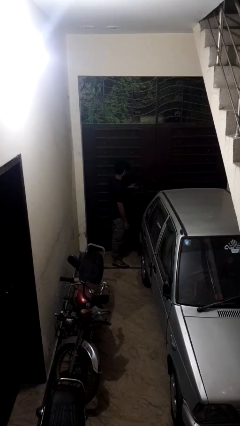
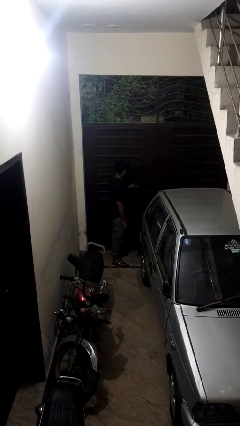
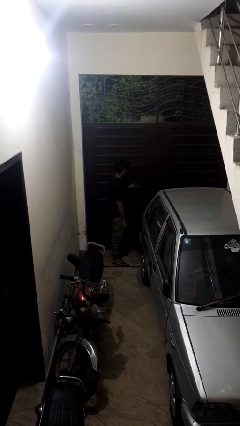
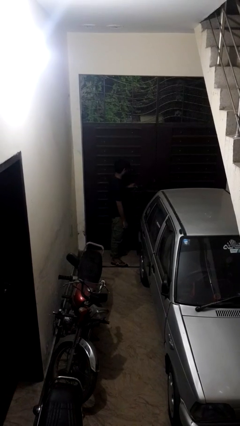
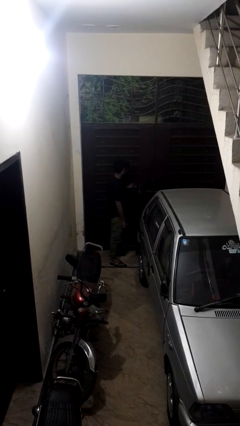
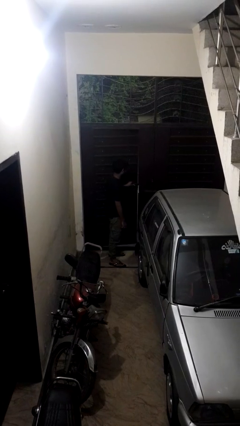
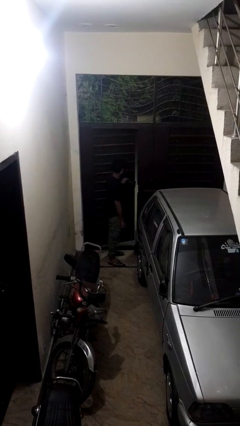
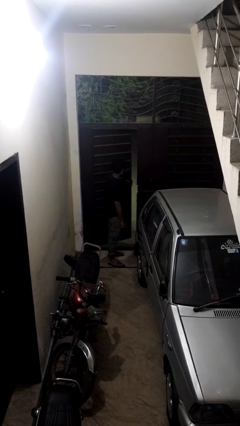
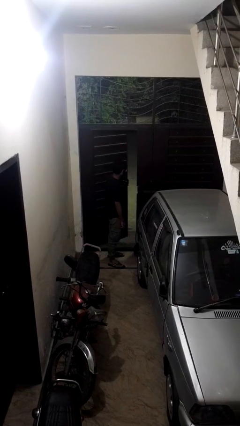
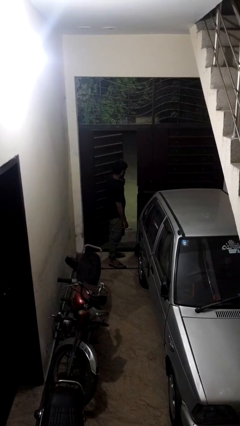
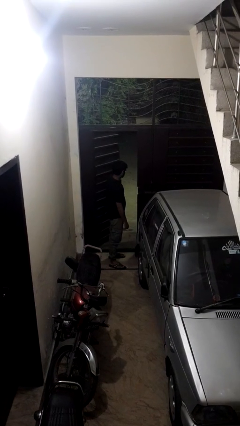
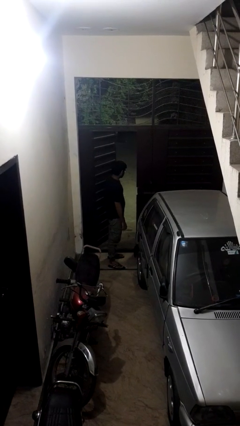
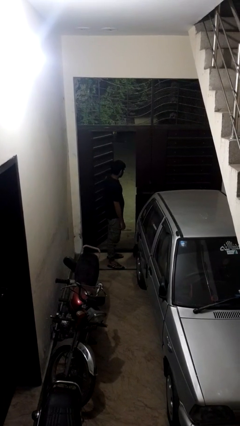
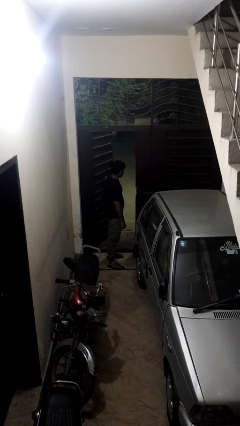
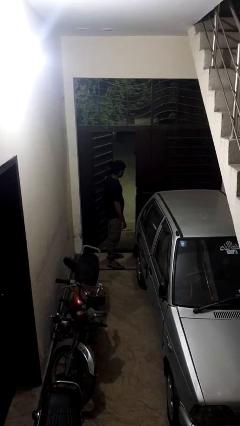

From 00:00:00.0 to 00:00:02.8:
person opens gate

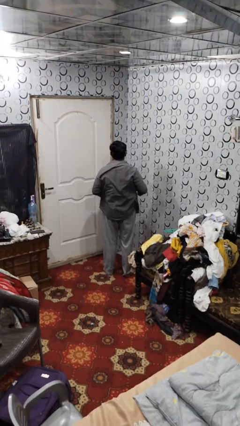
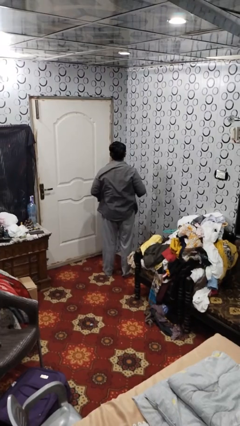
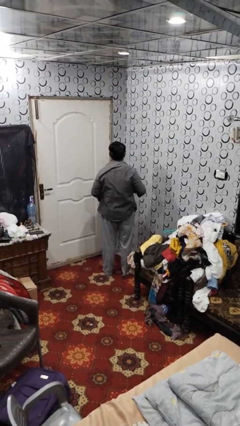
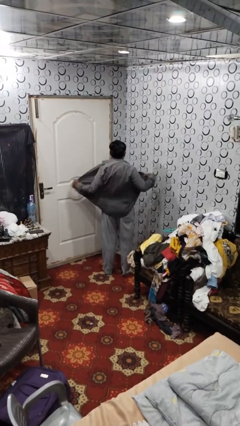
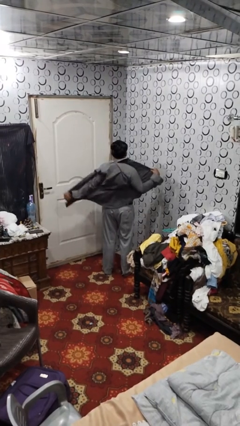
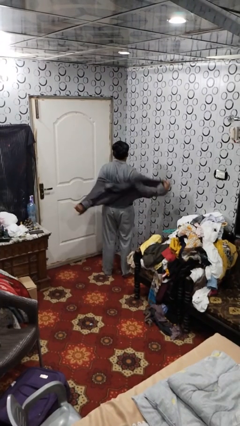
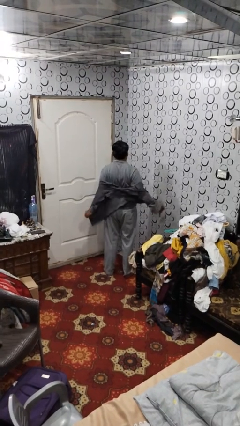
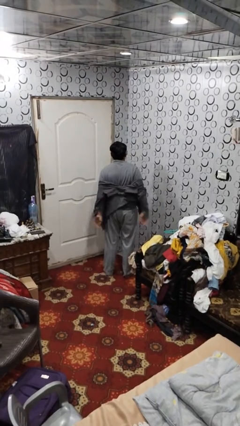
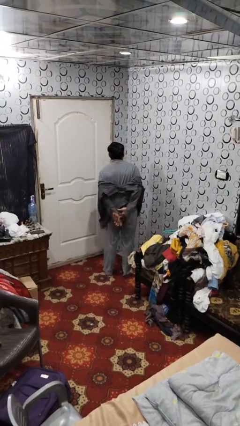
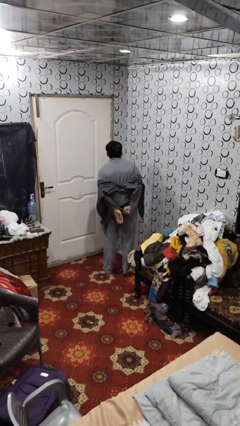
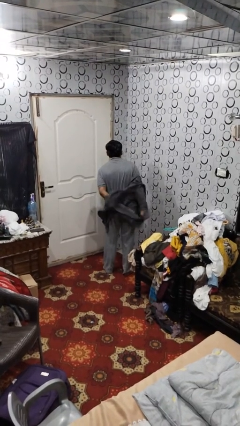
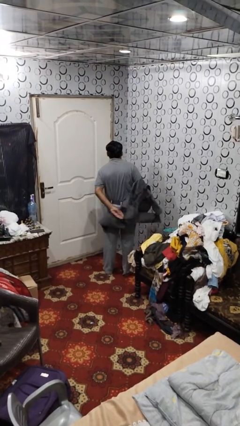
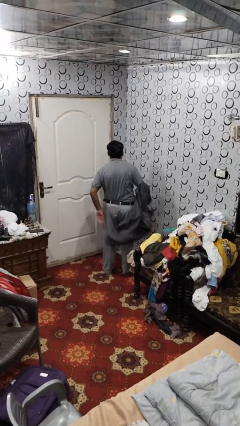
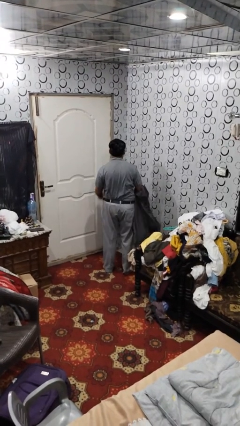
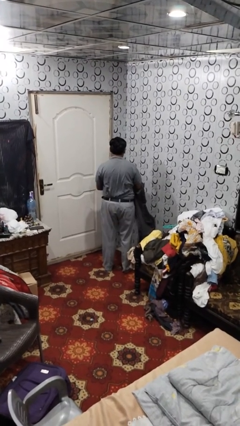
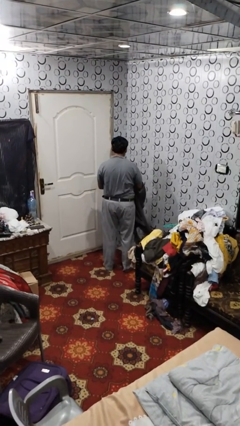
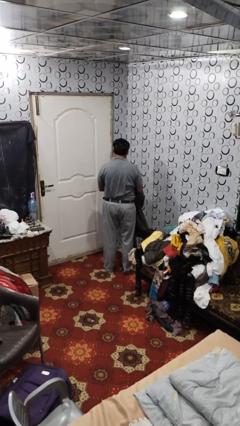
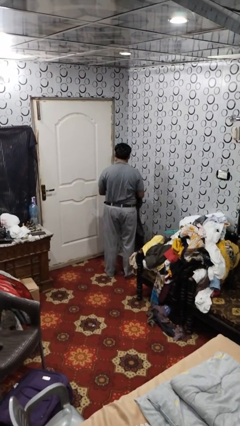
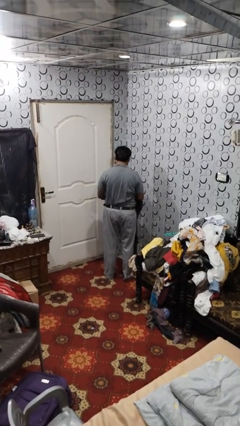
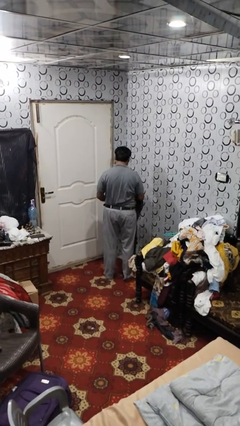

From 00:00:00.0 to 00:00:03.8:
person takes off shirt

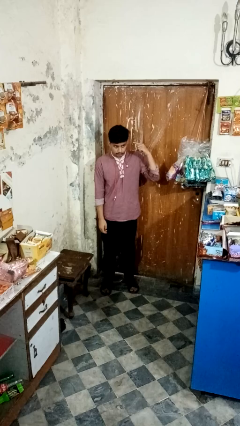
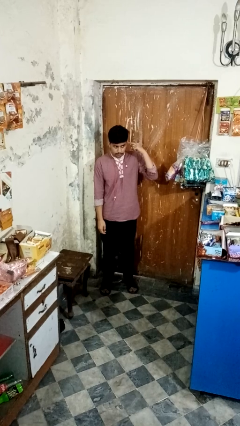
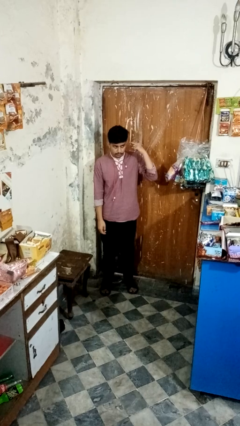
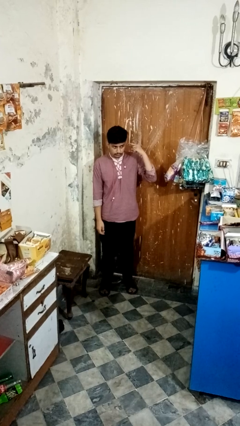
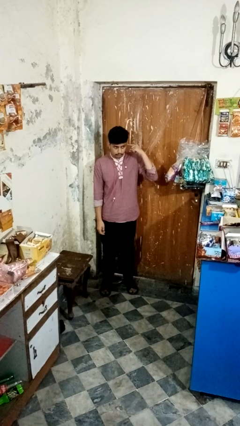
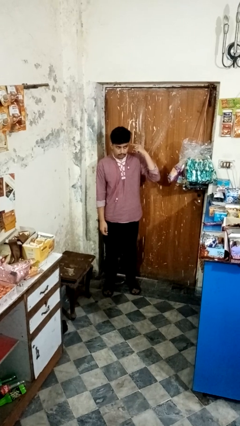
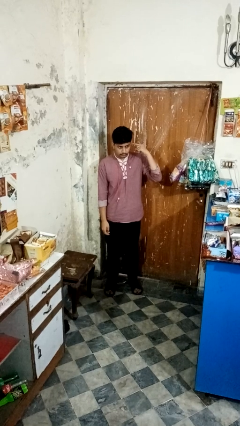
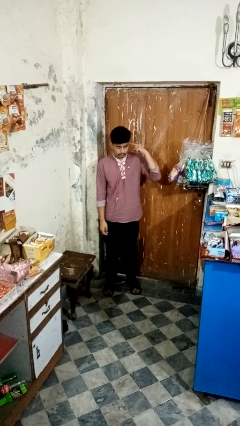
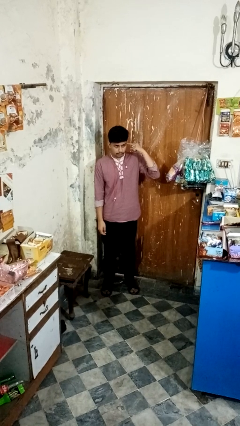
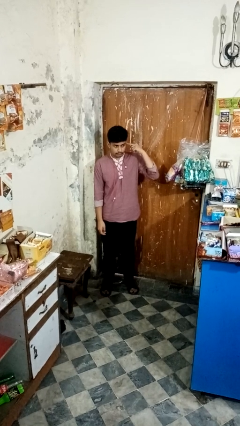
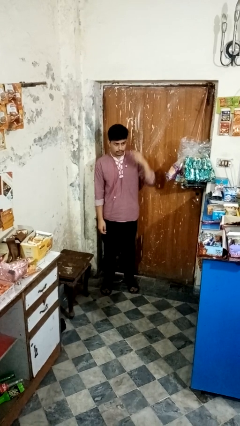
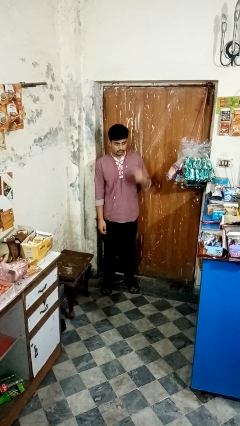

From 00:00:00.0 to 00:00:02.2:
person gestures listen closely

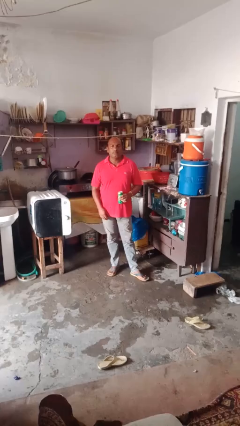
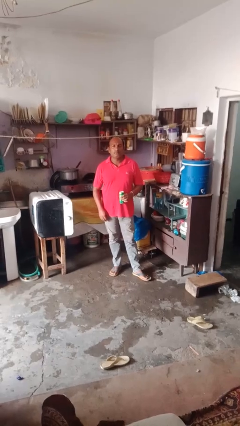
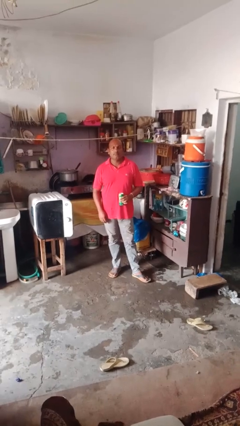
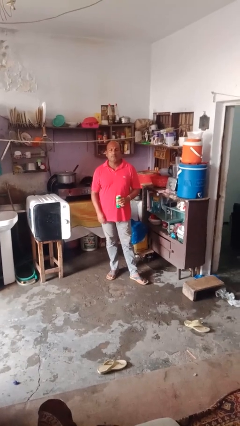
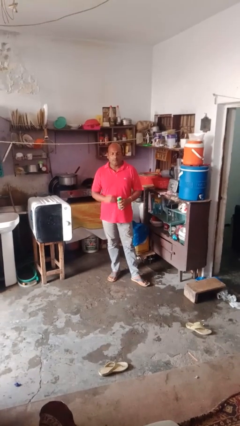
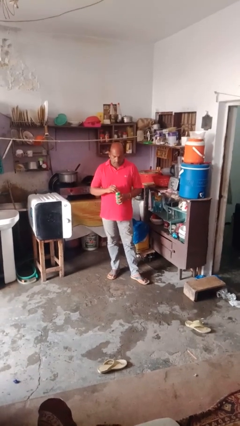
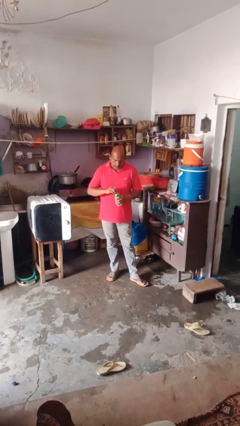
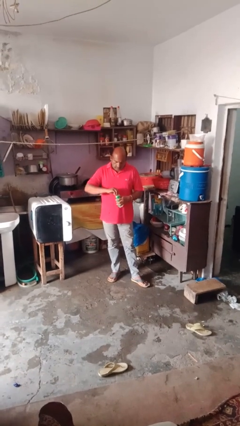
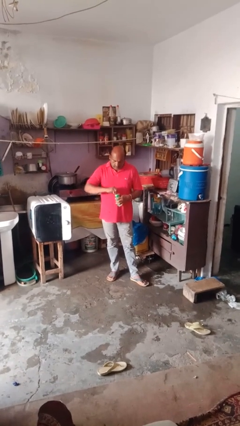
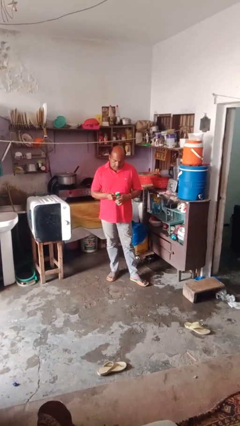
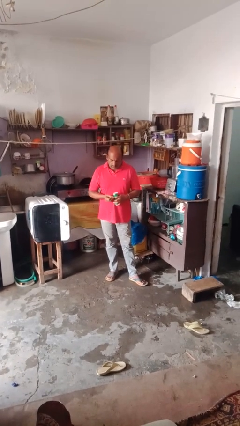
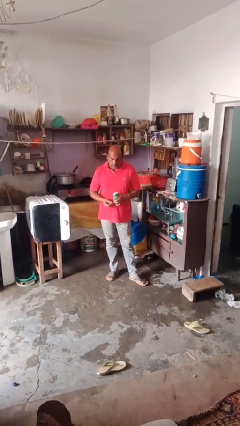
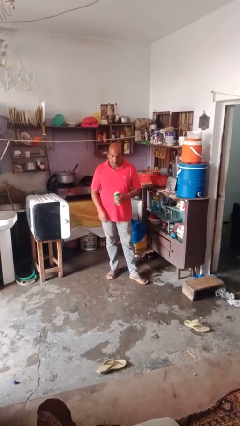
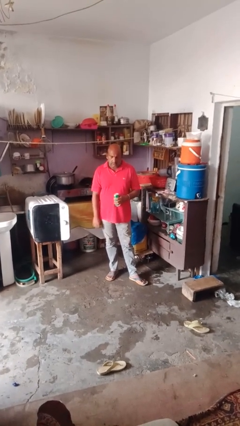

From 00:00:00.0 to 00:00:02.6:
person opens beverage can

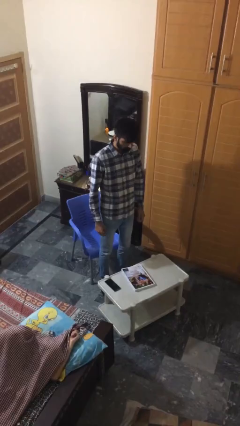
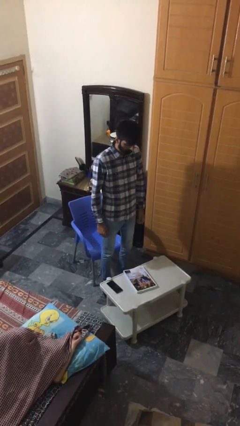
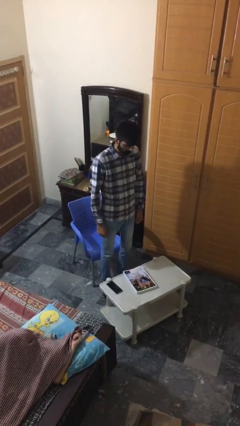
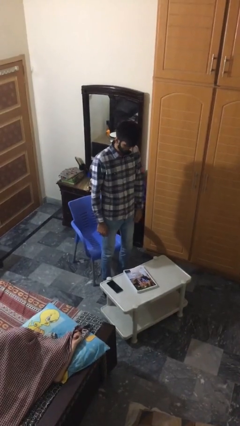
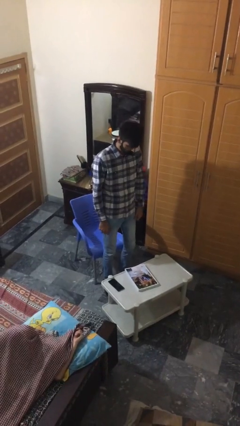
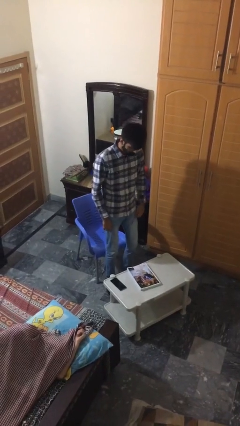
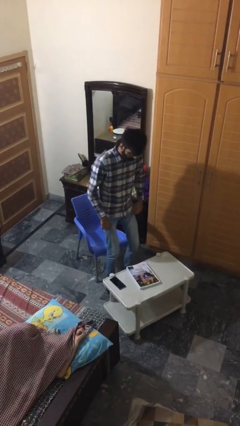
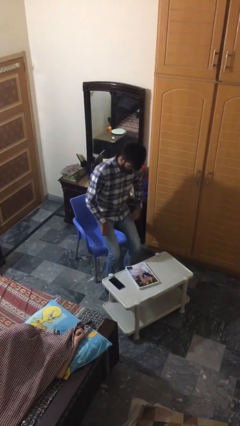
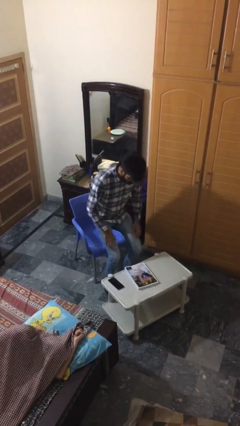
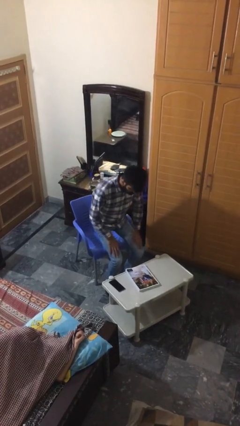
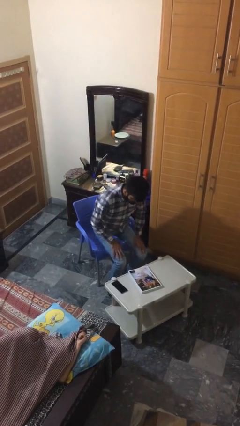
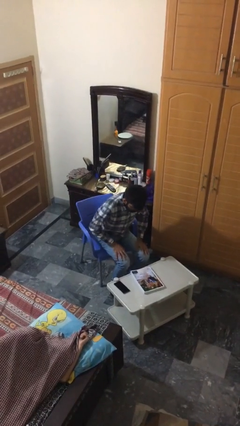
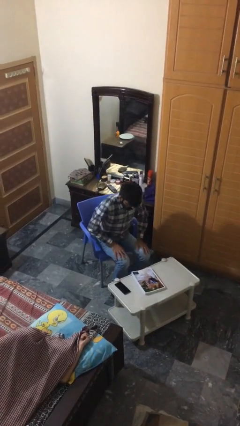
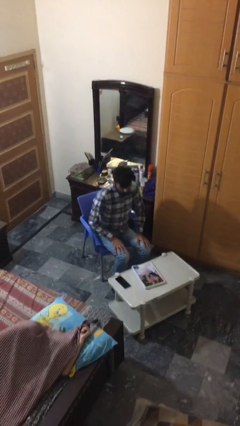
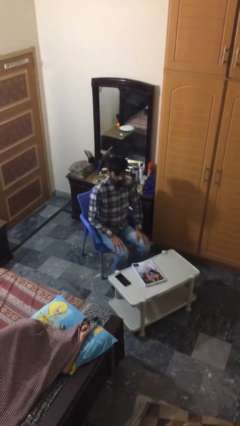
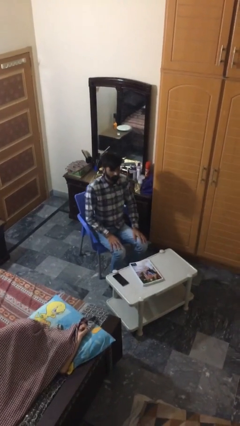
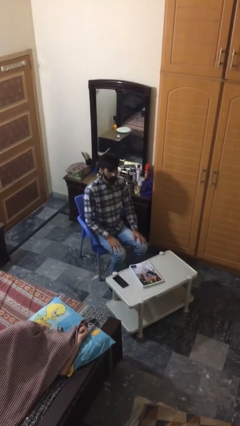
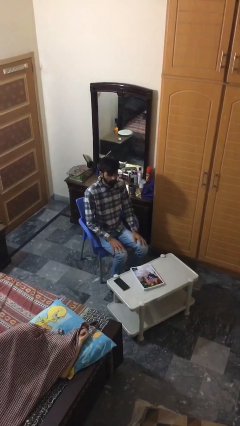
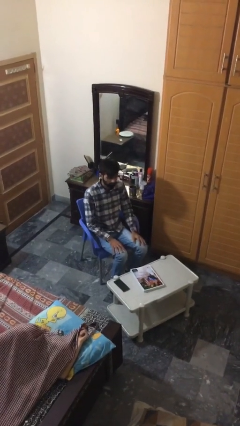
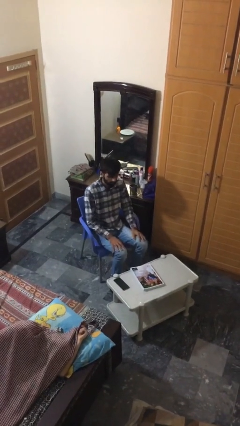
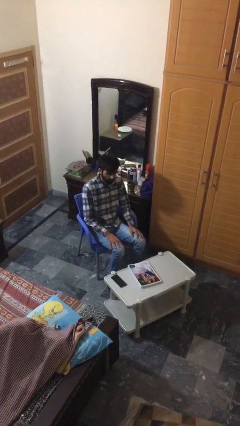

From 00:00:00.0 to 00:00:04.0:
person sits down

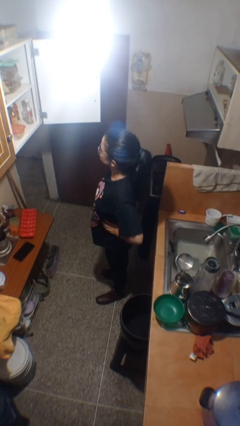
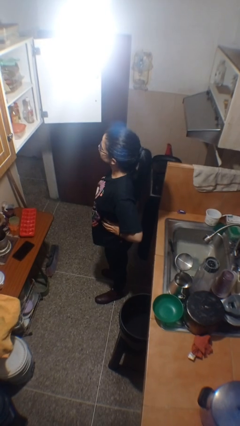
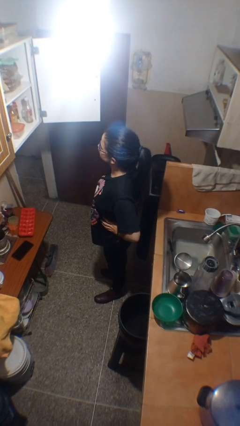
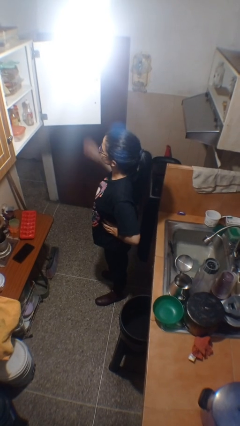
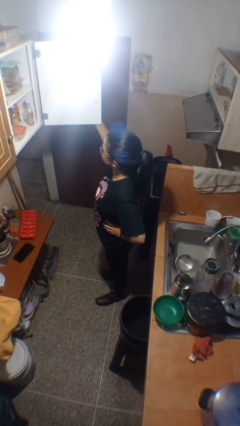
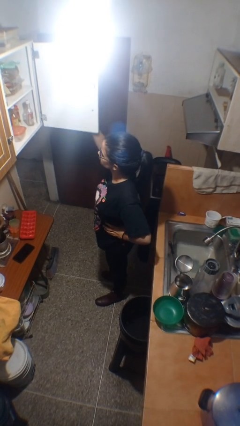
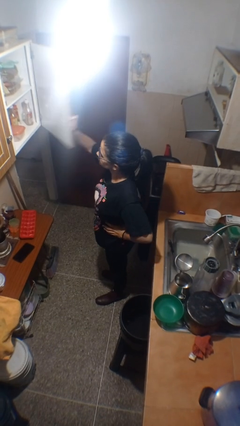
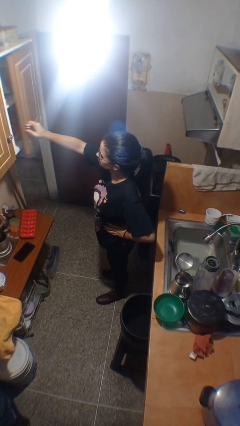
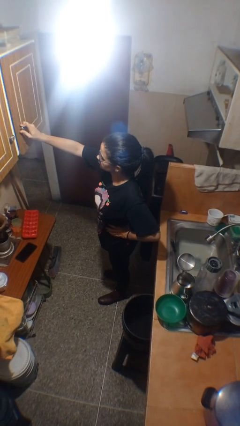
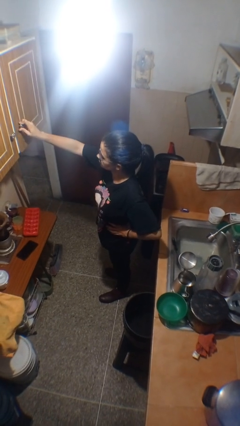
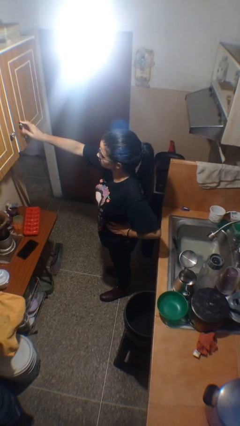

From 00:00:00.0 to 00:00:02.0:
person closes cabinet

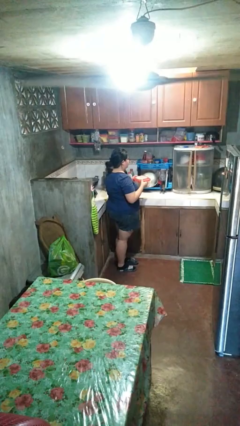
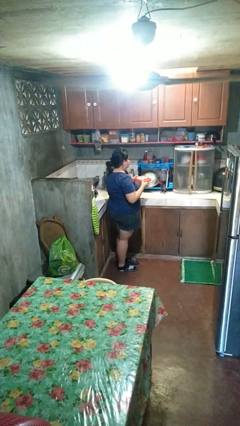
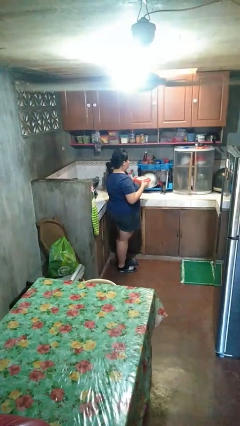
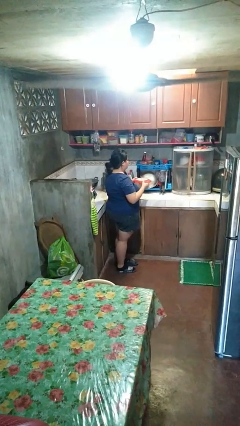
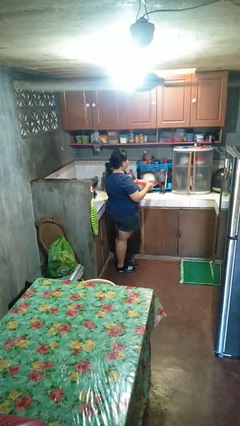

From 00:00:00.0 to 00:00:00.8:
person puts down object on countertop
